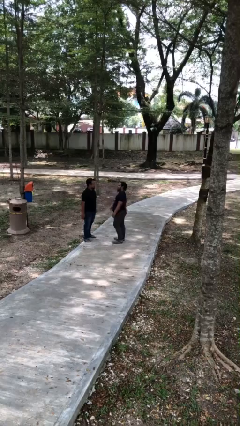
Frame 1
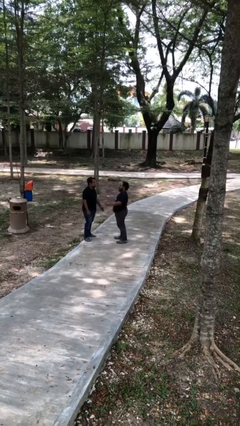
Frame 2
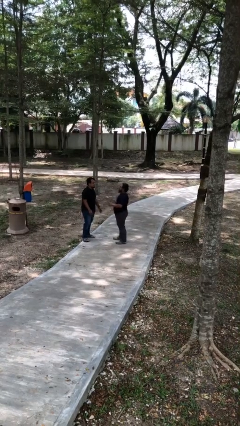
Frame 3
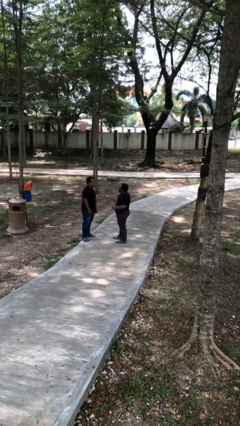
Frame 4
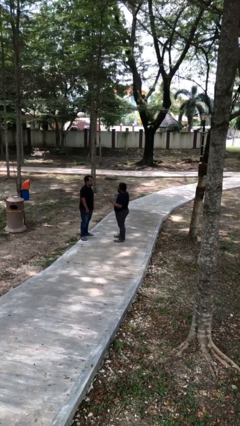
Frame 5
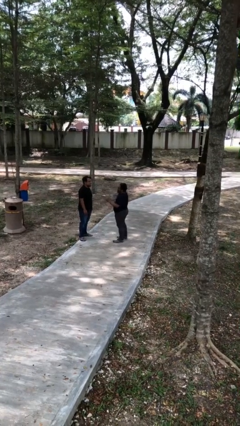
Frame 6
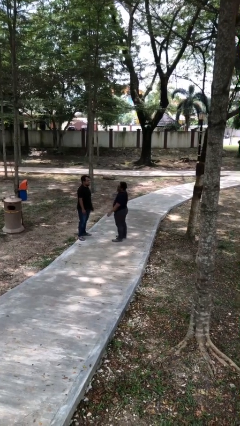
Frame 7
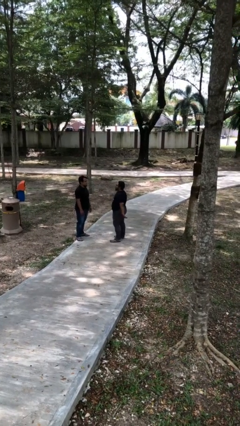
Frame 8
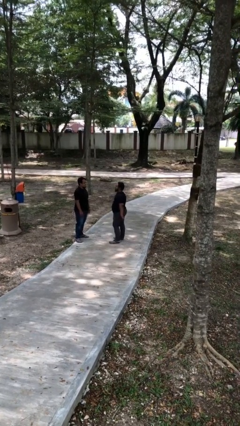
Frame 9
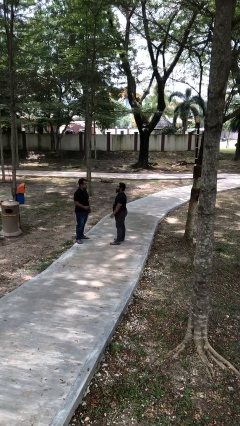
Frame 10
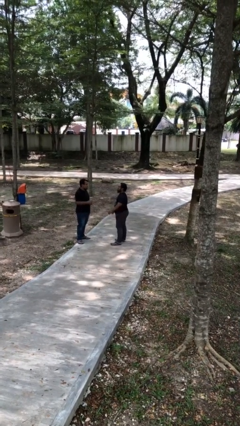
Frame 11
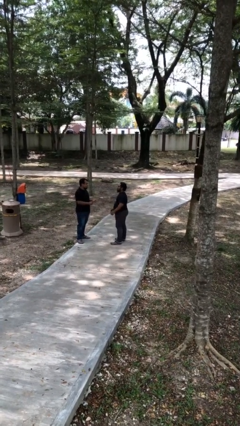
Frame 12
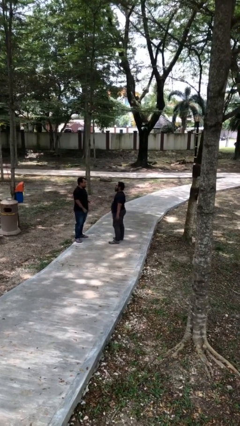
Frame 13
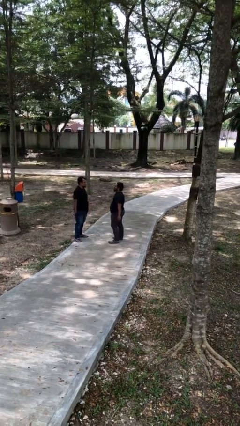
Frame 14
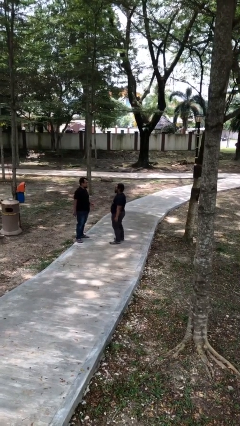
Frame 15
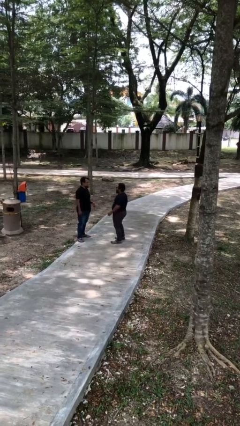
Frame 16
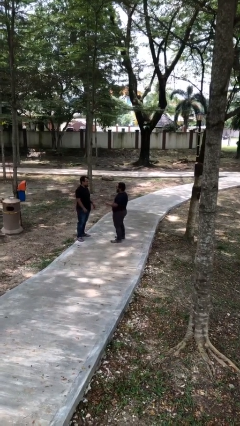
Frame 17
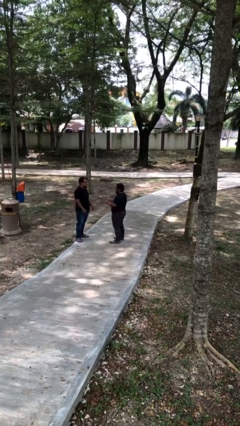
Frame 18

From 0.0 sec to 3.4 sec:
person talks to person

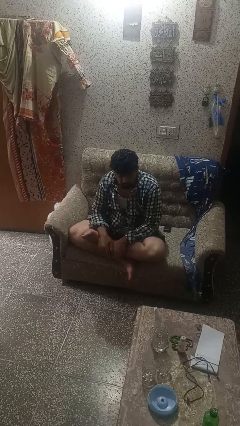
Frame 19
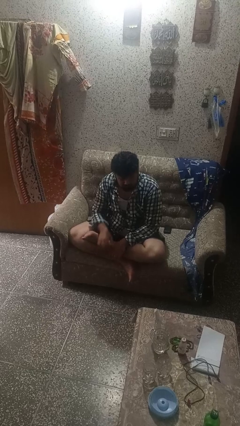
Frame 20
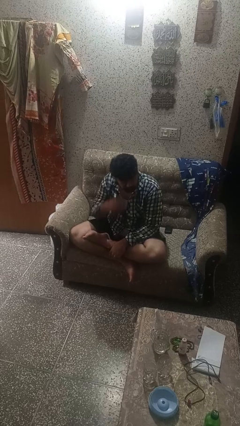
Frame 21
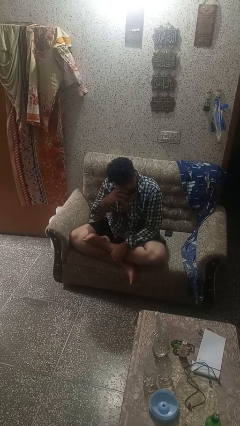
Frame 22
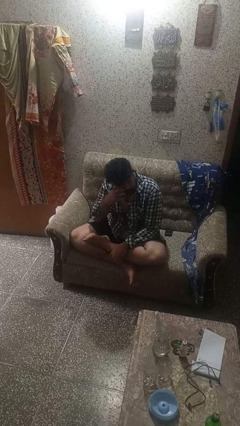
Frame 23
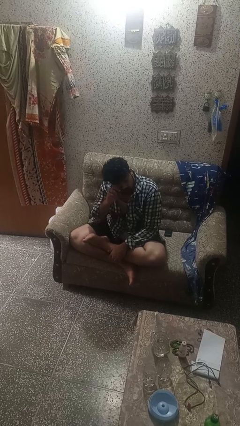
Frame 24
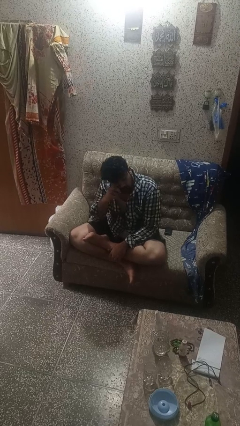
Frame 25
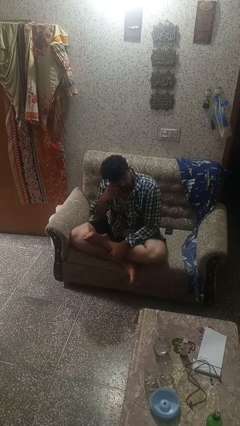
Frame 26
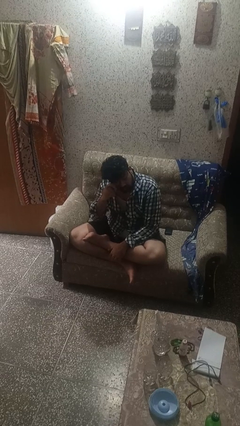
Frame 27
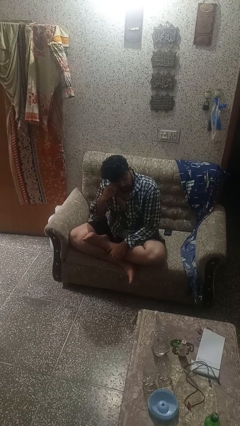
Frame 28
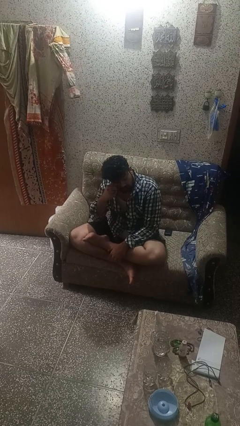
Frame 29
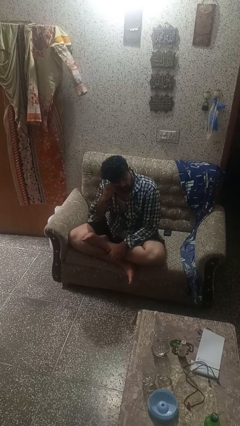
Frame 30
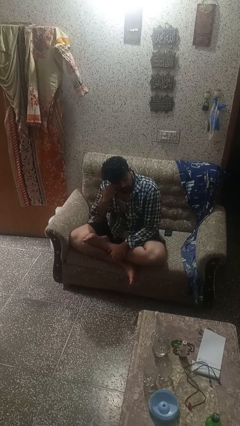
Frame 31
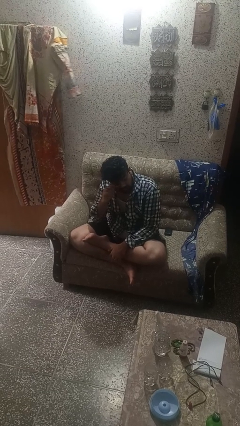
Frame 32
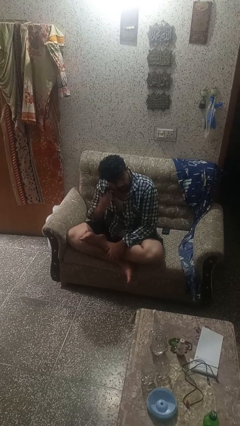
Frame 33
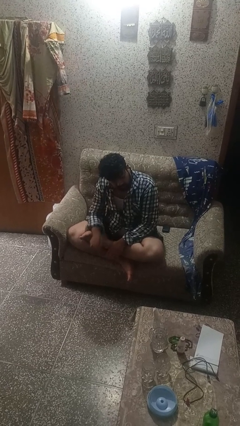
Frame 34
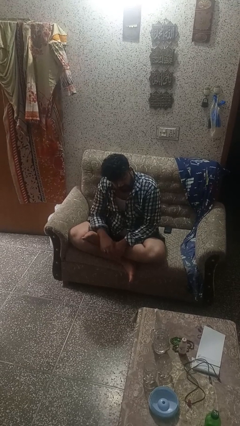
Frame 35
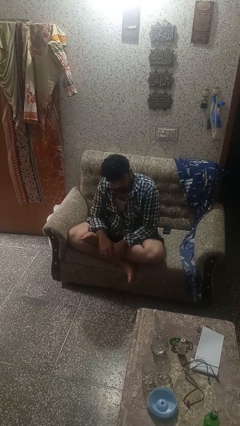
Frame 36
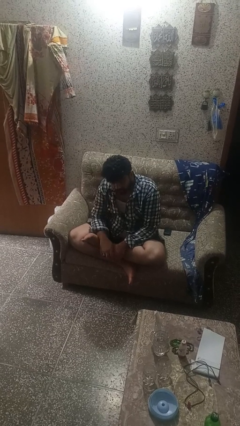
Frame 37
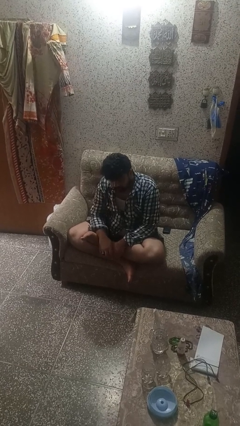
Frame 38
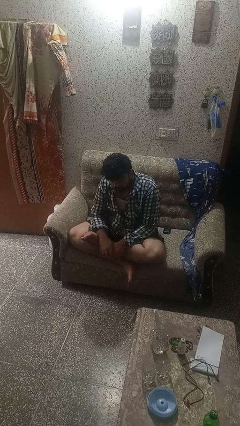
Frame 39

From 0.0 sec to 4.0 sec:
person rubs eyes

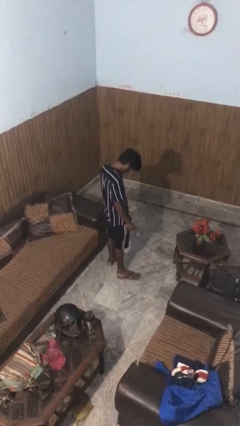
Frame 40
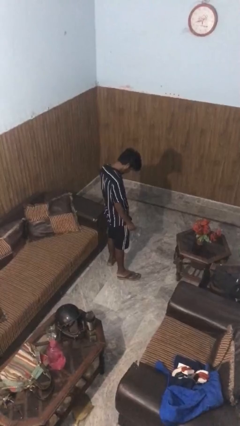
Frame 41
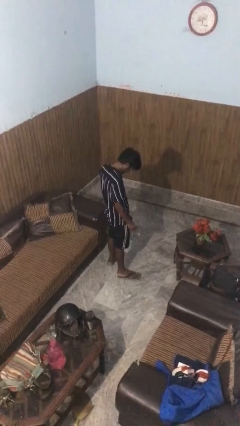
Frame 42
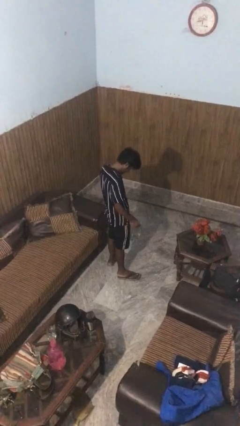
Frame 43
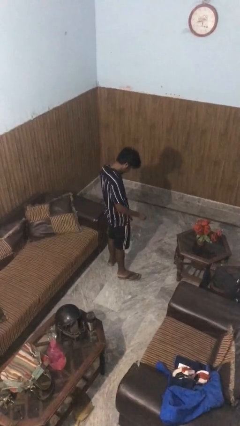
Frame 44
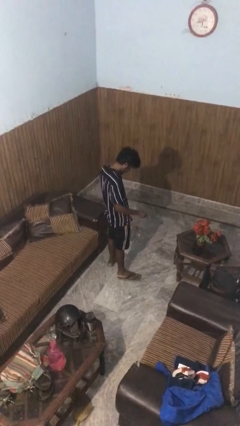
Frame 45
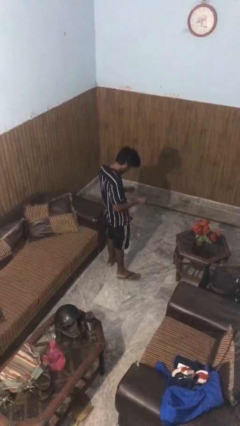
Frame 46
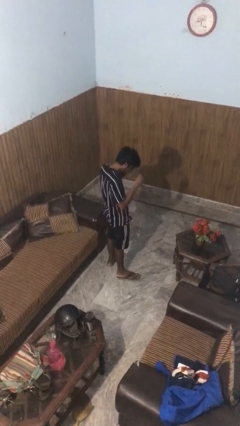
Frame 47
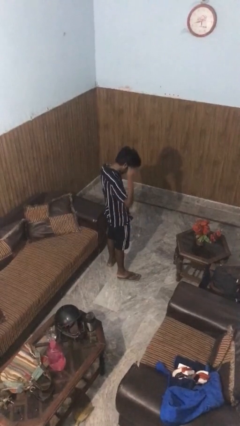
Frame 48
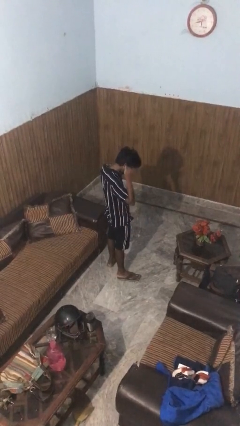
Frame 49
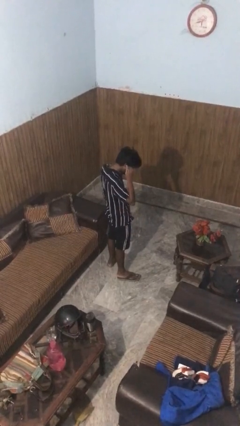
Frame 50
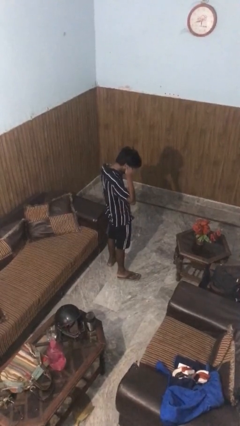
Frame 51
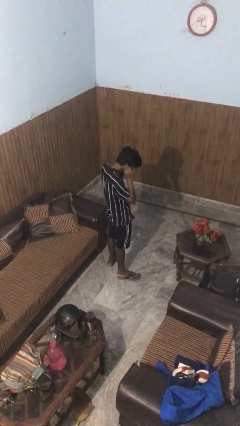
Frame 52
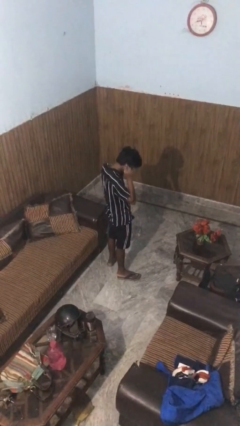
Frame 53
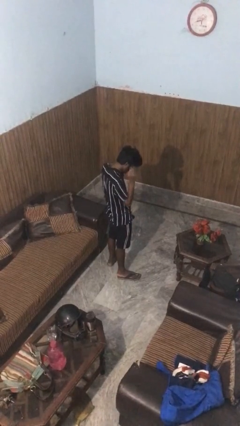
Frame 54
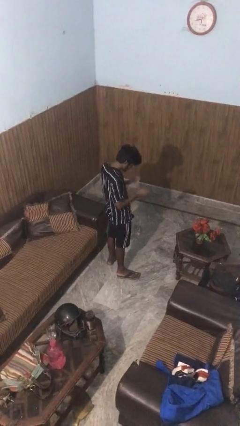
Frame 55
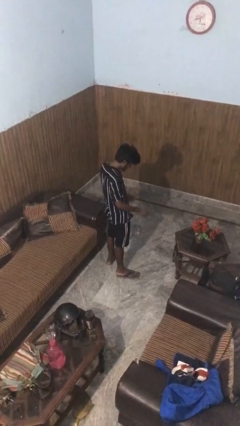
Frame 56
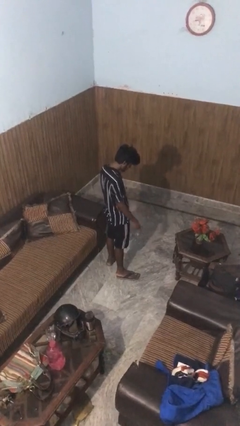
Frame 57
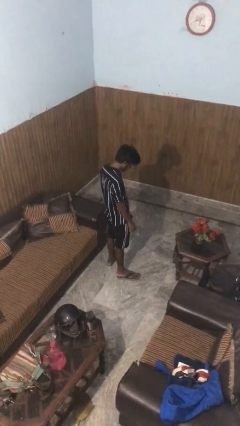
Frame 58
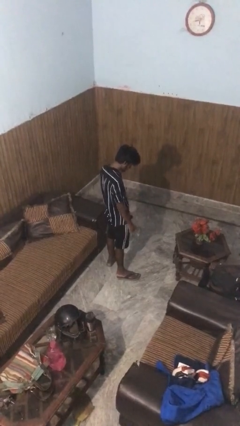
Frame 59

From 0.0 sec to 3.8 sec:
person puts on headphones

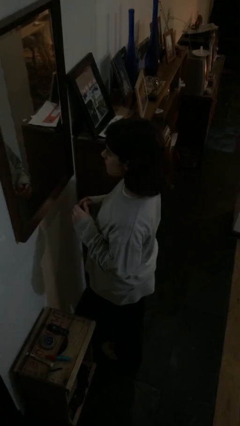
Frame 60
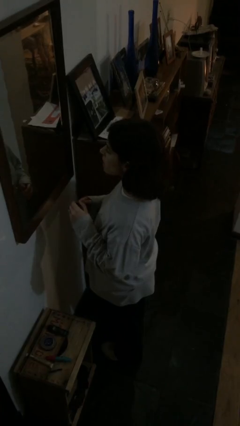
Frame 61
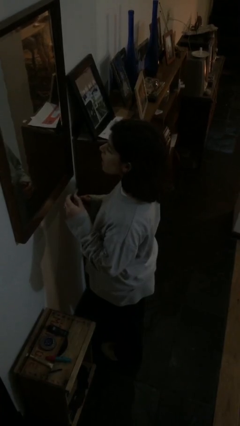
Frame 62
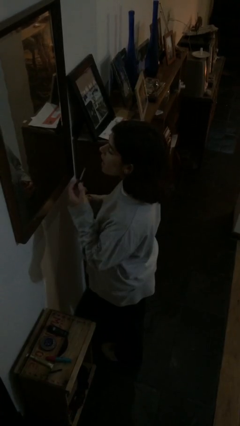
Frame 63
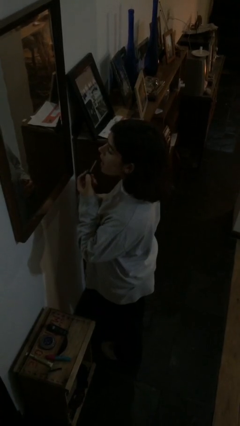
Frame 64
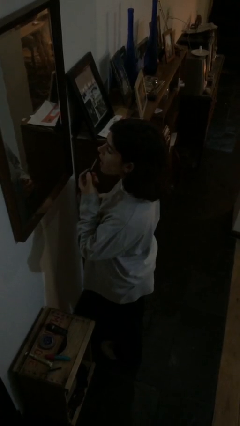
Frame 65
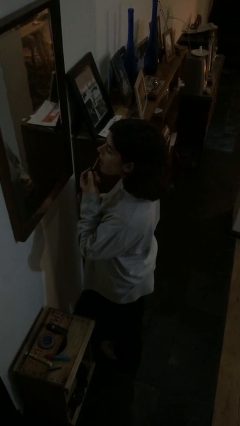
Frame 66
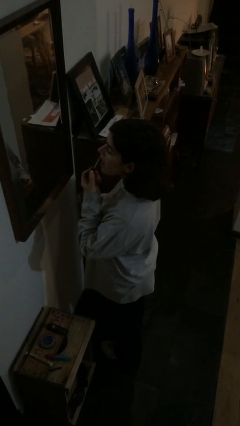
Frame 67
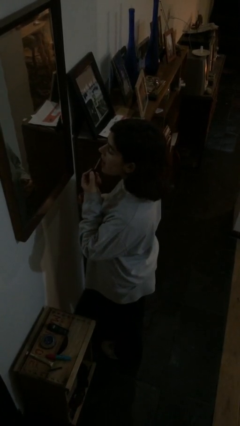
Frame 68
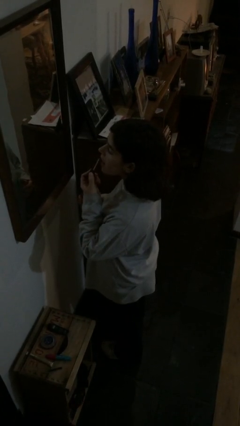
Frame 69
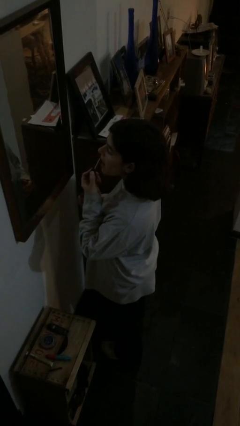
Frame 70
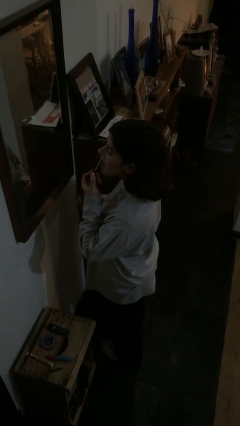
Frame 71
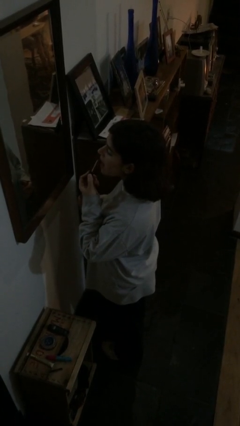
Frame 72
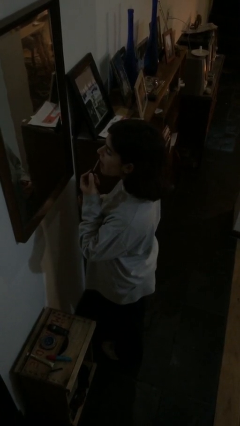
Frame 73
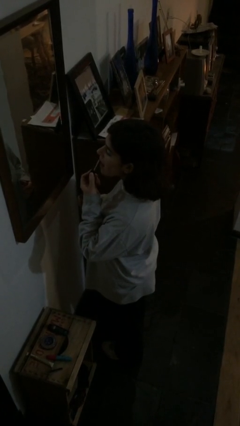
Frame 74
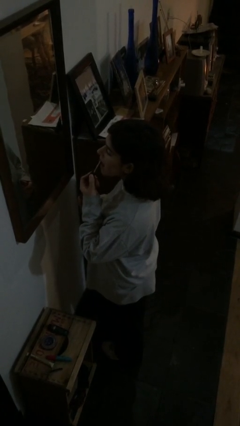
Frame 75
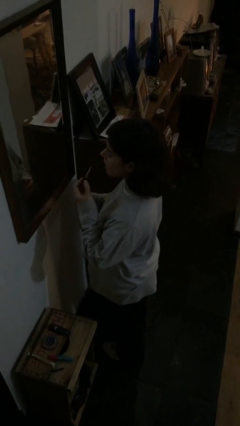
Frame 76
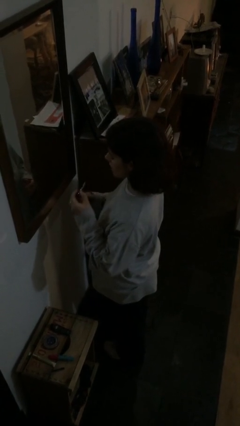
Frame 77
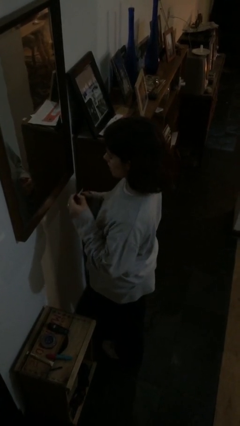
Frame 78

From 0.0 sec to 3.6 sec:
person applies lip makeup

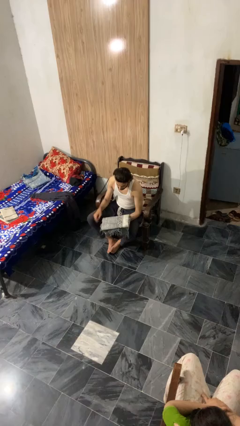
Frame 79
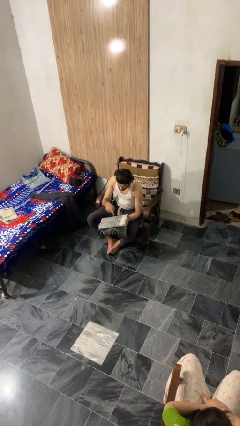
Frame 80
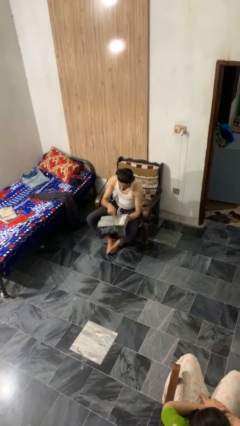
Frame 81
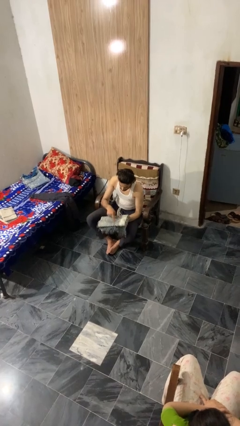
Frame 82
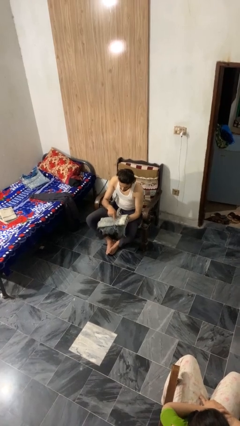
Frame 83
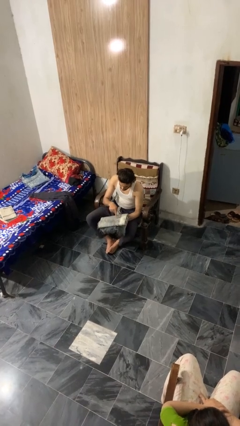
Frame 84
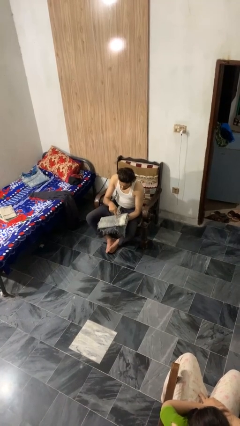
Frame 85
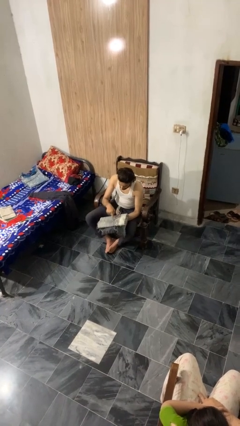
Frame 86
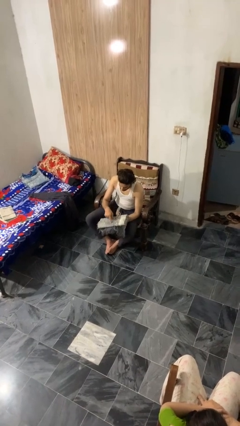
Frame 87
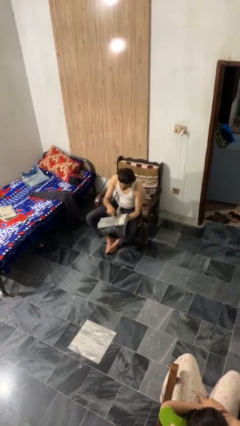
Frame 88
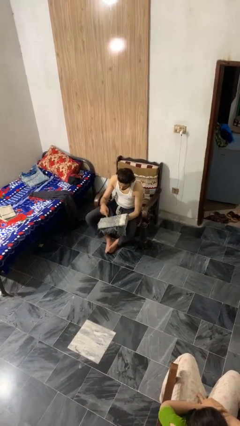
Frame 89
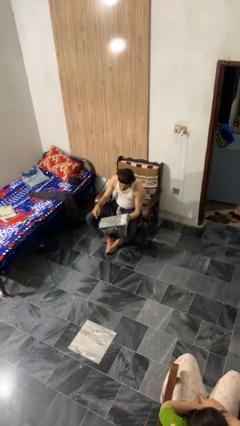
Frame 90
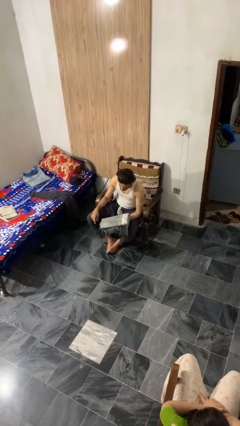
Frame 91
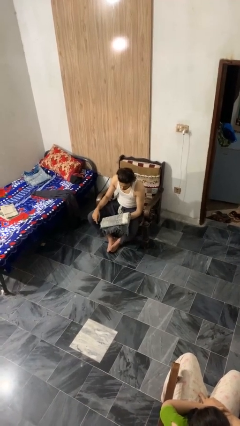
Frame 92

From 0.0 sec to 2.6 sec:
person taps object with finger
